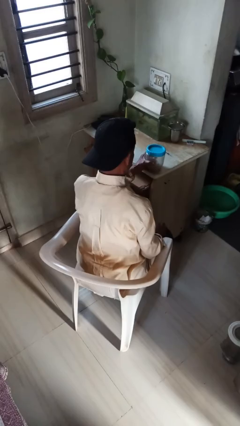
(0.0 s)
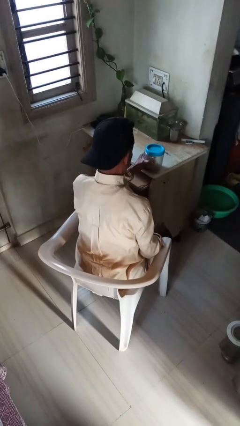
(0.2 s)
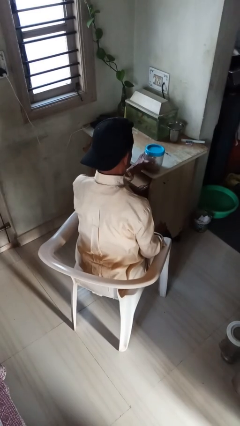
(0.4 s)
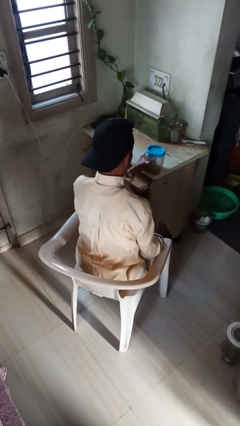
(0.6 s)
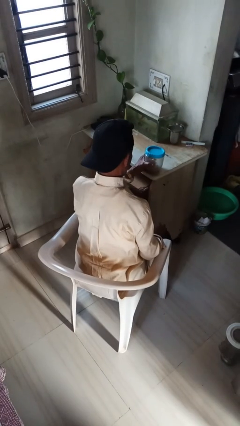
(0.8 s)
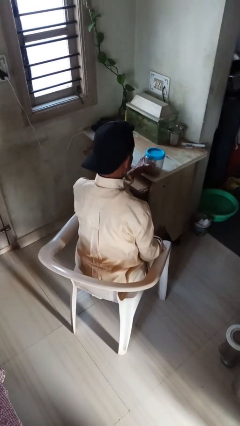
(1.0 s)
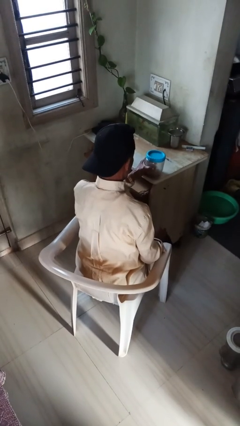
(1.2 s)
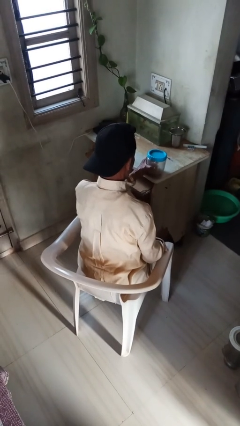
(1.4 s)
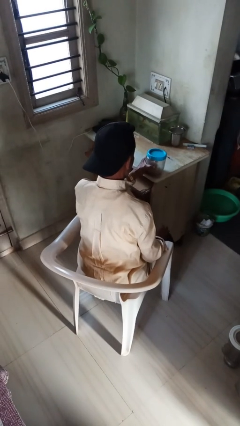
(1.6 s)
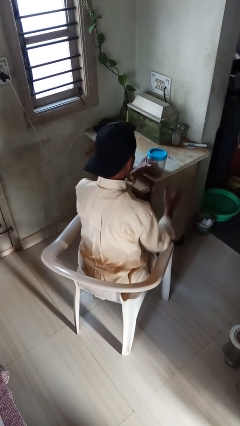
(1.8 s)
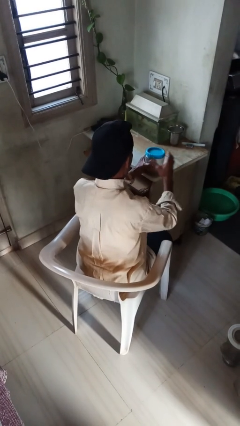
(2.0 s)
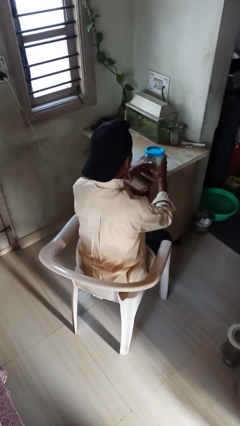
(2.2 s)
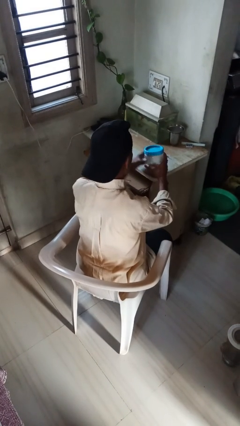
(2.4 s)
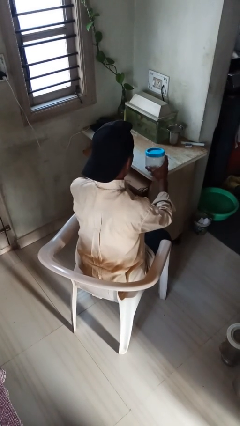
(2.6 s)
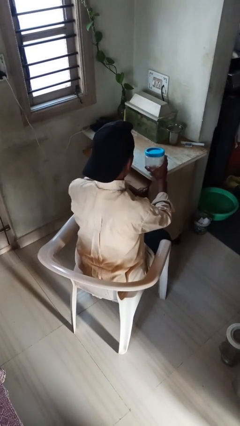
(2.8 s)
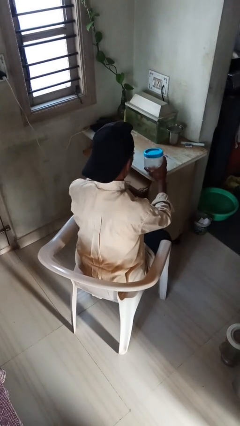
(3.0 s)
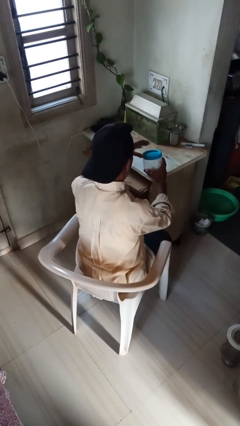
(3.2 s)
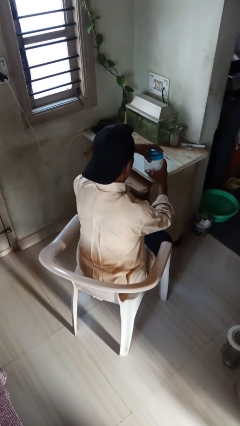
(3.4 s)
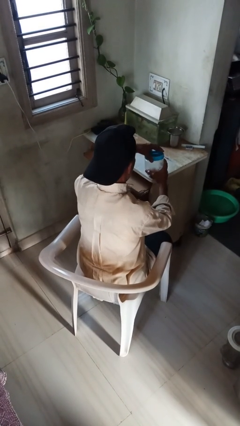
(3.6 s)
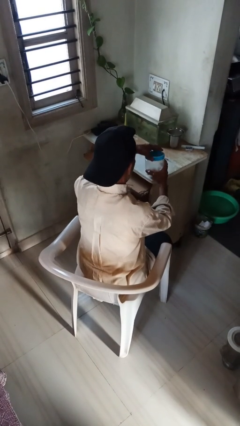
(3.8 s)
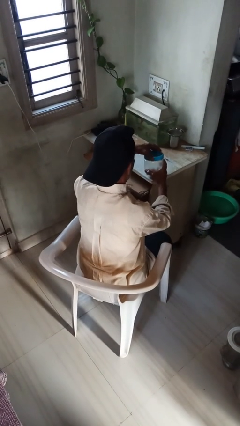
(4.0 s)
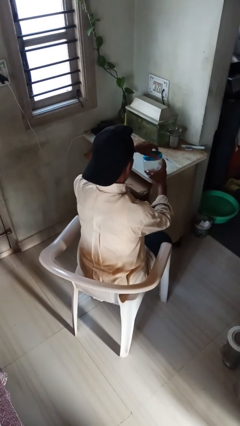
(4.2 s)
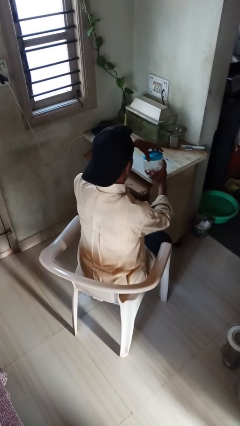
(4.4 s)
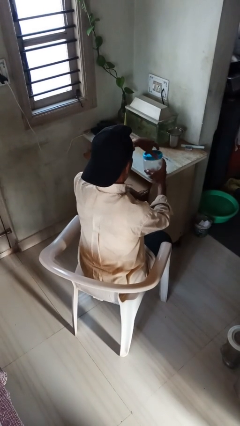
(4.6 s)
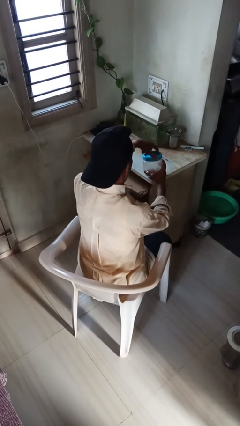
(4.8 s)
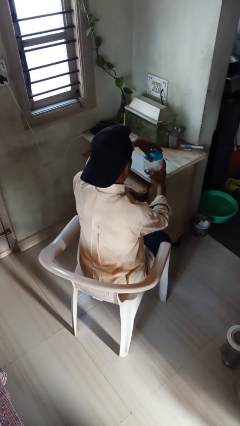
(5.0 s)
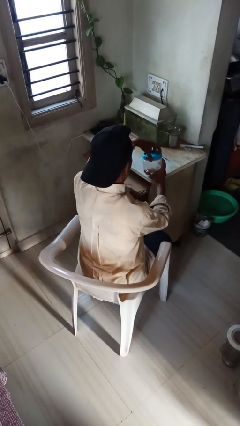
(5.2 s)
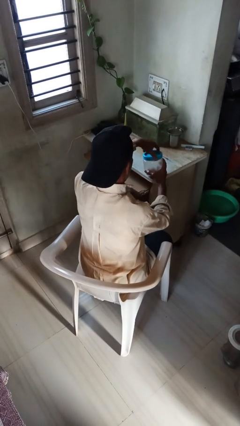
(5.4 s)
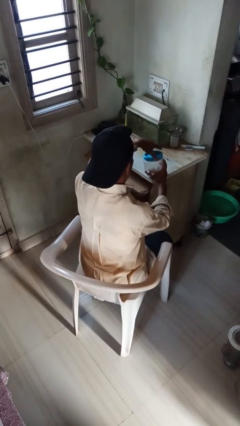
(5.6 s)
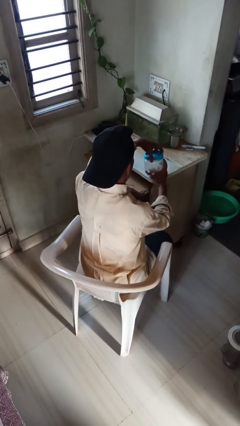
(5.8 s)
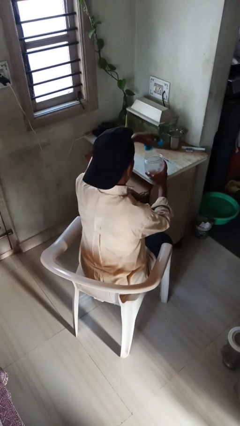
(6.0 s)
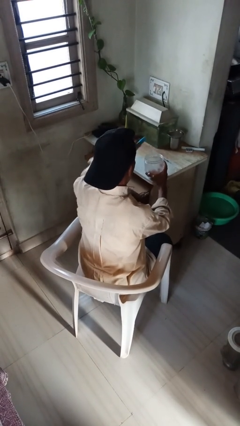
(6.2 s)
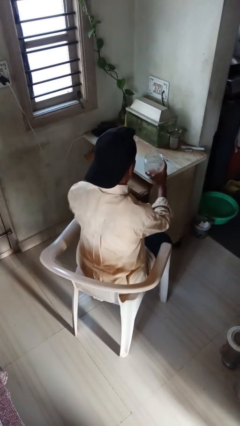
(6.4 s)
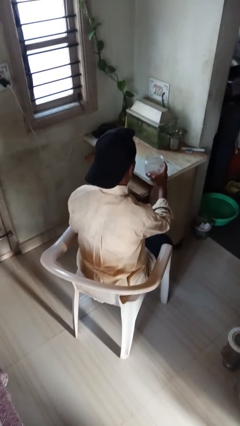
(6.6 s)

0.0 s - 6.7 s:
person opens jar

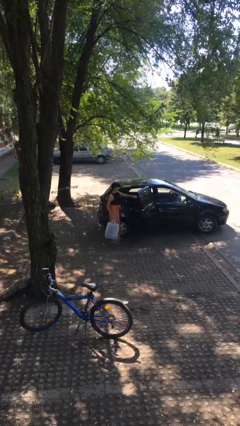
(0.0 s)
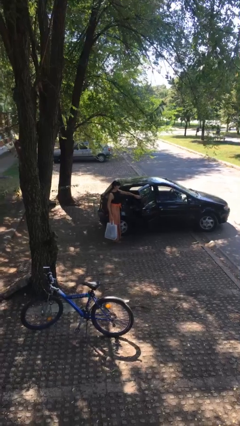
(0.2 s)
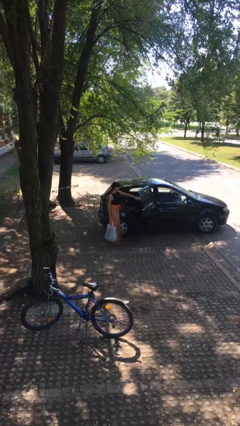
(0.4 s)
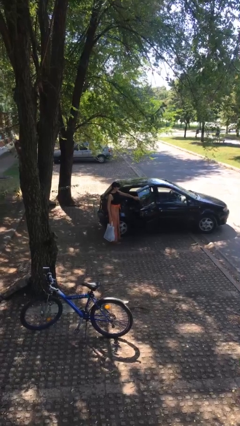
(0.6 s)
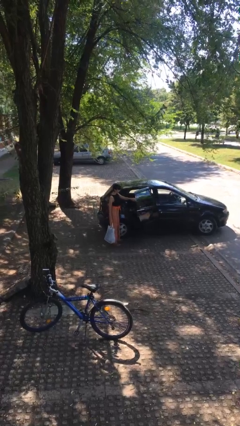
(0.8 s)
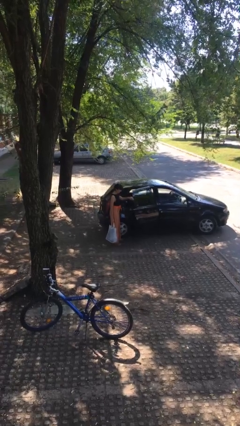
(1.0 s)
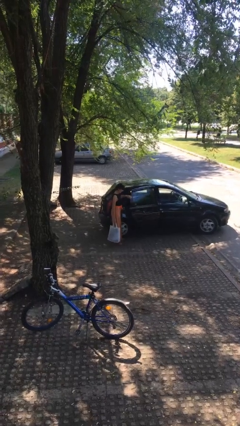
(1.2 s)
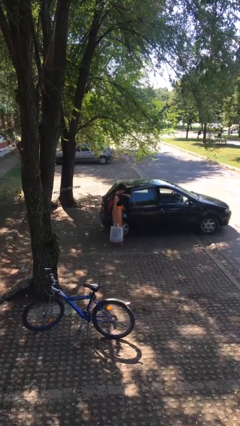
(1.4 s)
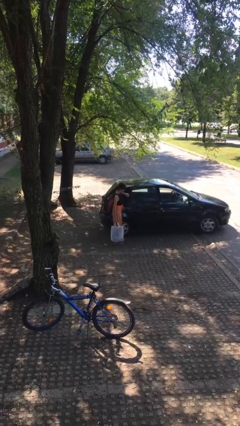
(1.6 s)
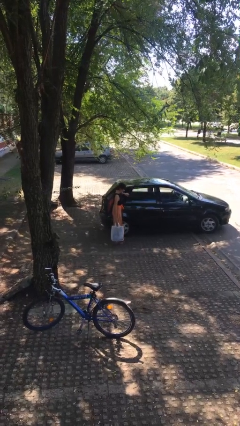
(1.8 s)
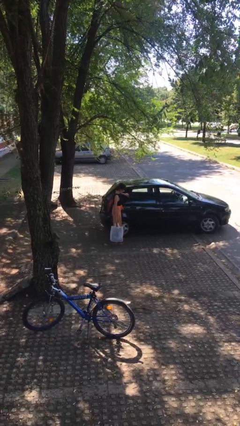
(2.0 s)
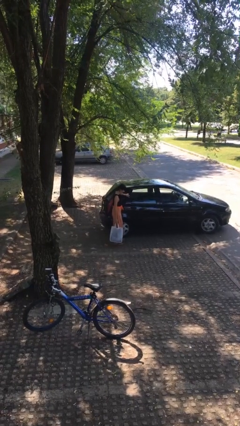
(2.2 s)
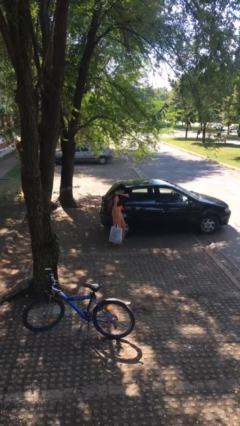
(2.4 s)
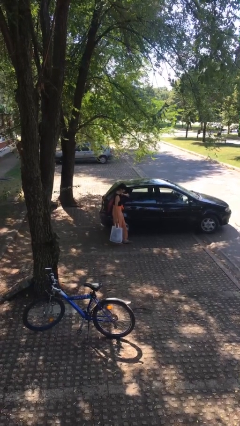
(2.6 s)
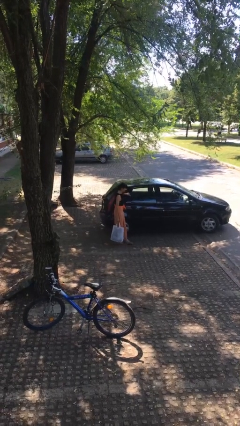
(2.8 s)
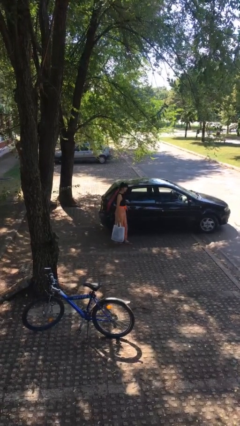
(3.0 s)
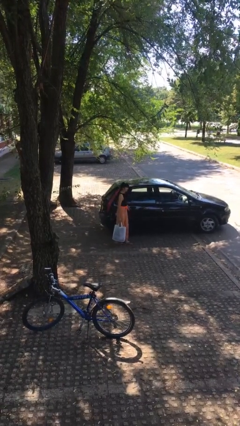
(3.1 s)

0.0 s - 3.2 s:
person closes car door

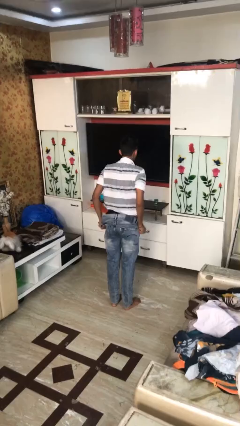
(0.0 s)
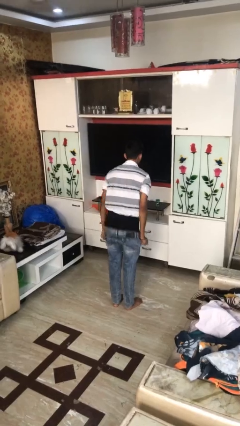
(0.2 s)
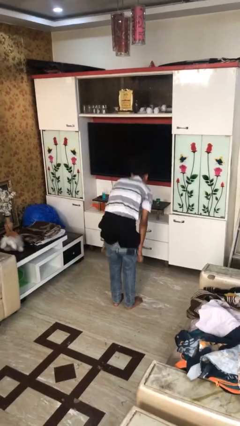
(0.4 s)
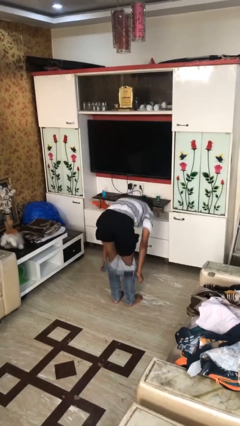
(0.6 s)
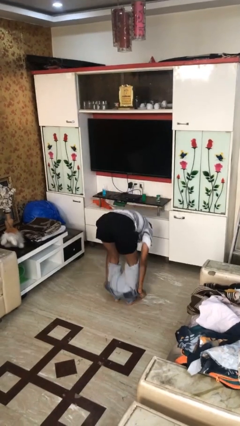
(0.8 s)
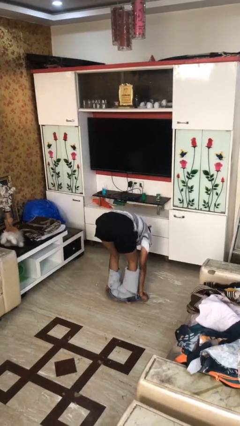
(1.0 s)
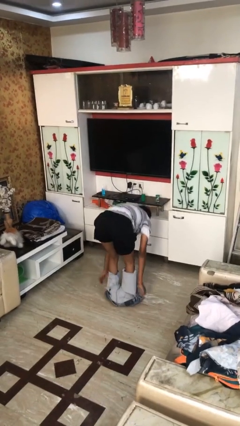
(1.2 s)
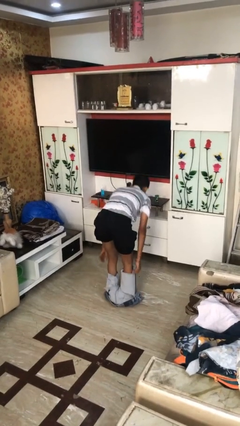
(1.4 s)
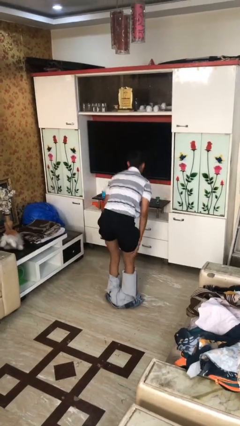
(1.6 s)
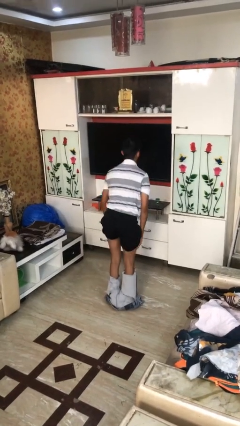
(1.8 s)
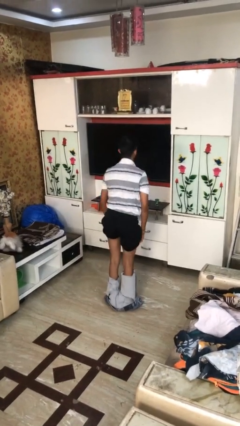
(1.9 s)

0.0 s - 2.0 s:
person takes off pants

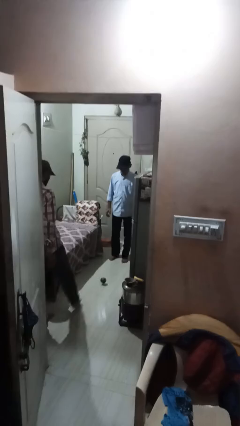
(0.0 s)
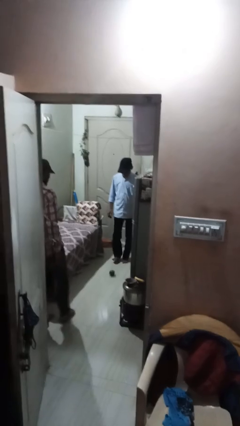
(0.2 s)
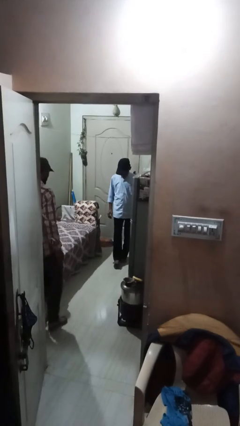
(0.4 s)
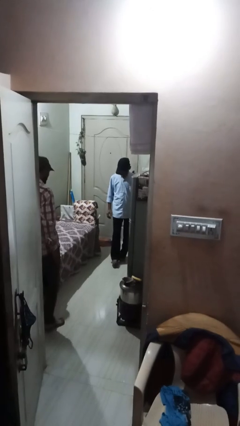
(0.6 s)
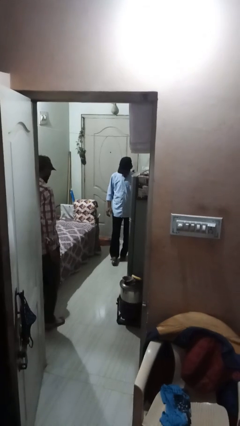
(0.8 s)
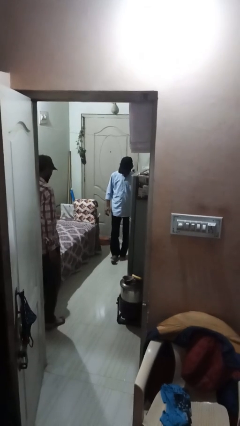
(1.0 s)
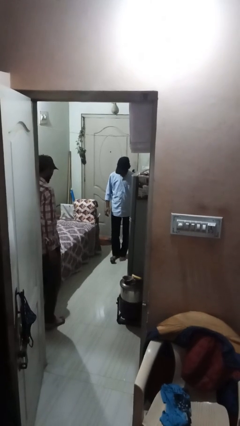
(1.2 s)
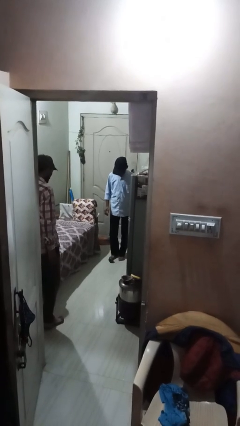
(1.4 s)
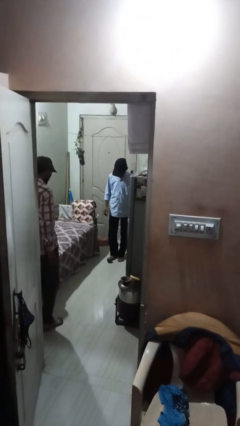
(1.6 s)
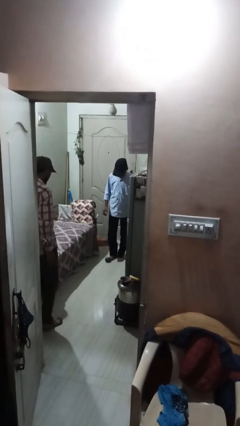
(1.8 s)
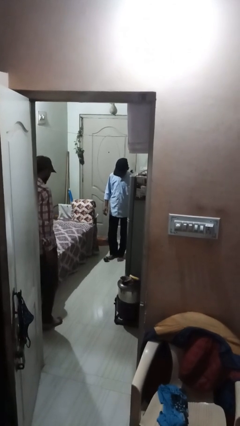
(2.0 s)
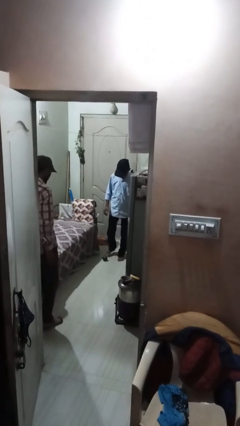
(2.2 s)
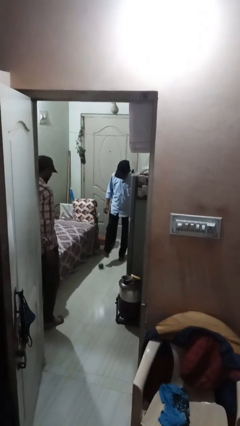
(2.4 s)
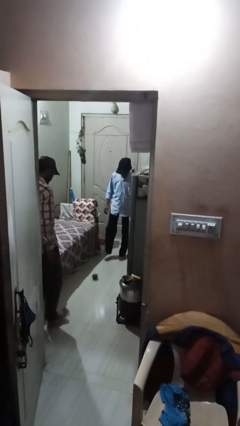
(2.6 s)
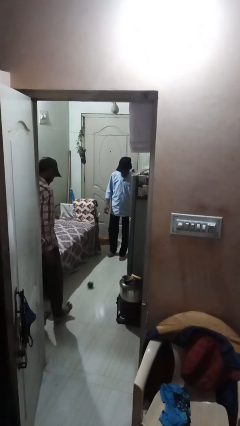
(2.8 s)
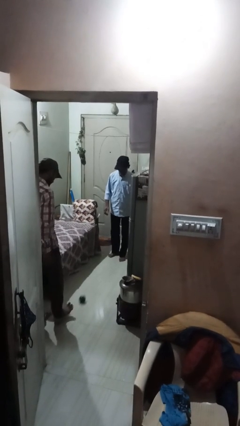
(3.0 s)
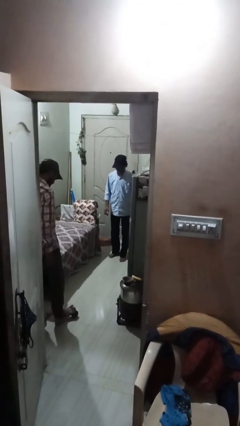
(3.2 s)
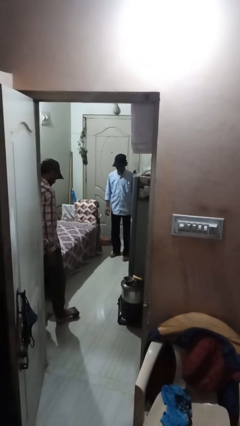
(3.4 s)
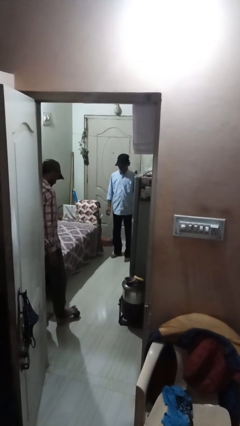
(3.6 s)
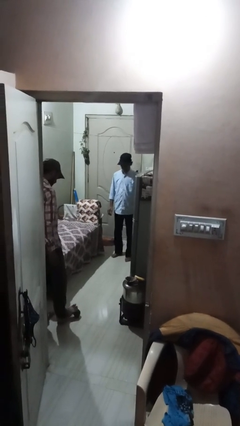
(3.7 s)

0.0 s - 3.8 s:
person kicks object to person

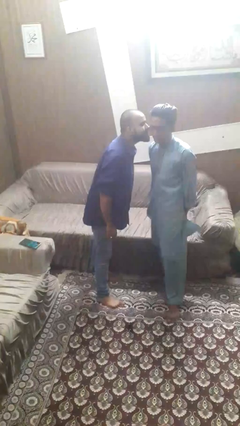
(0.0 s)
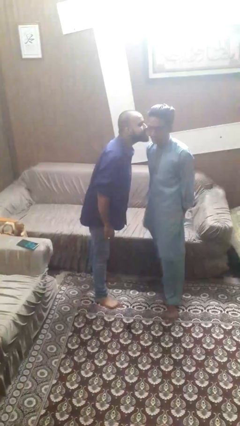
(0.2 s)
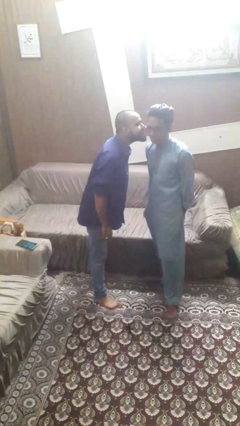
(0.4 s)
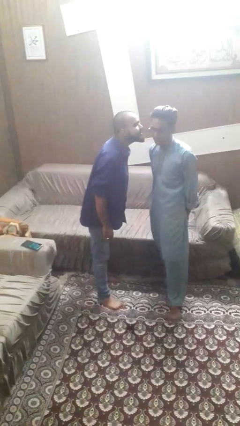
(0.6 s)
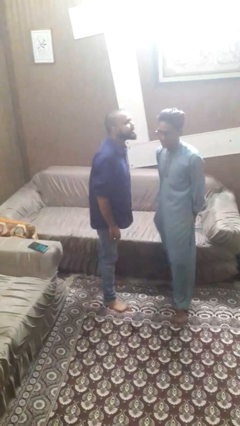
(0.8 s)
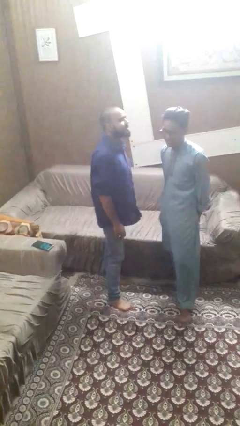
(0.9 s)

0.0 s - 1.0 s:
person kisses cheek of person

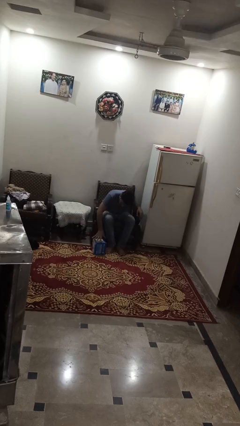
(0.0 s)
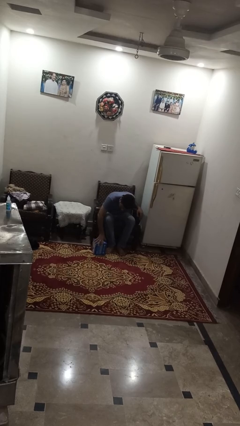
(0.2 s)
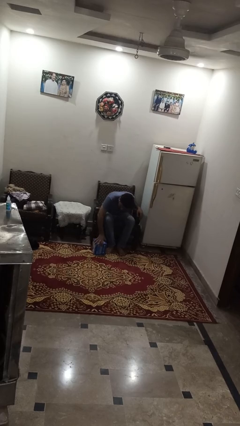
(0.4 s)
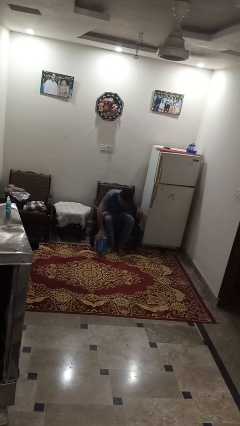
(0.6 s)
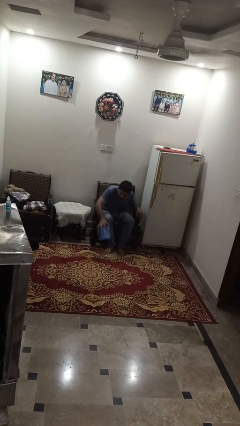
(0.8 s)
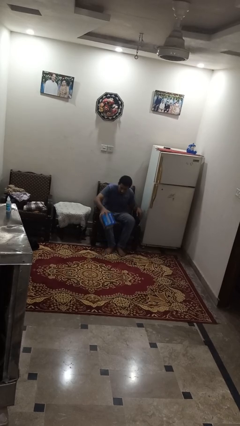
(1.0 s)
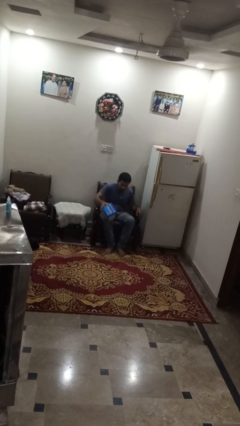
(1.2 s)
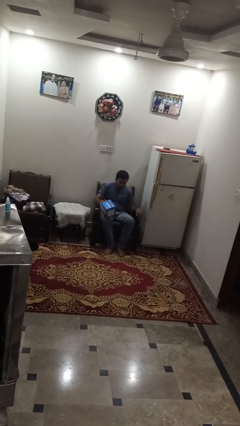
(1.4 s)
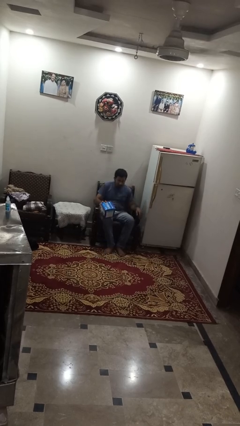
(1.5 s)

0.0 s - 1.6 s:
person picks up object from floor
